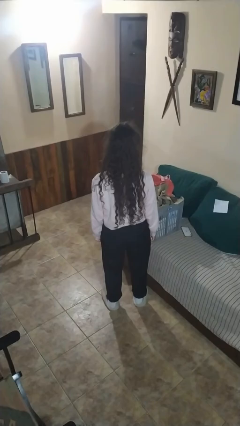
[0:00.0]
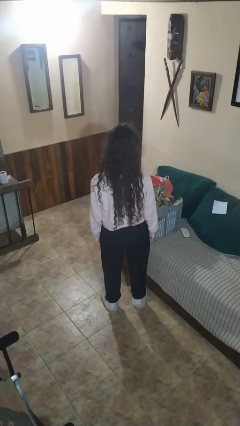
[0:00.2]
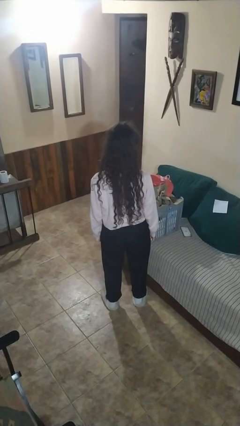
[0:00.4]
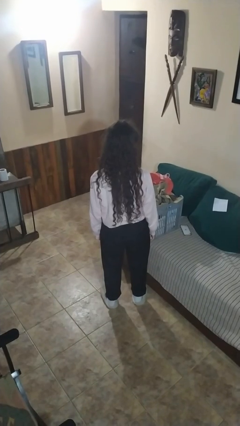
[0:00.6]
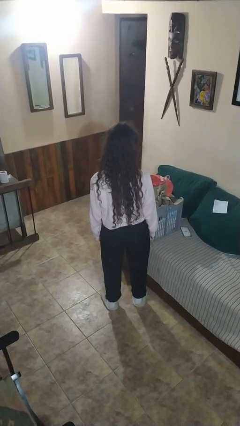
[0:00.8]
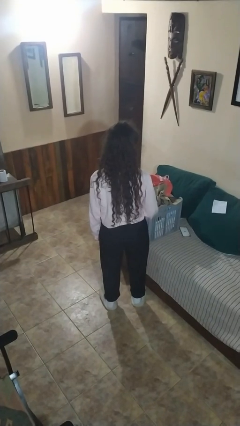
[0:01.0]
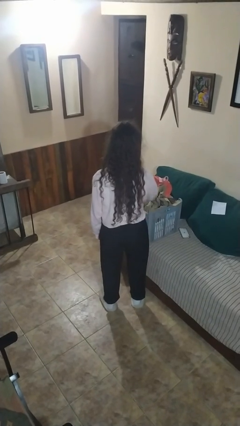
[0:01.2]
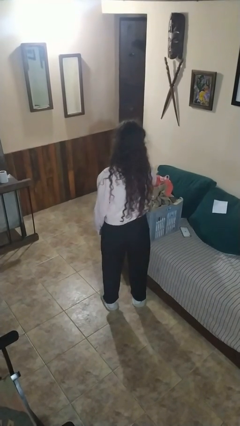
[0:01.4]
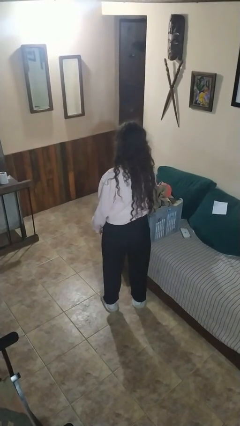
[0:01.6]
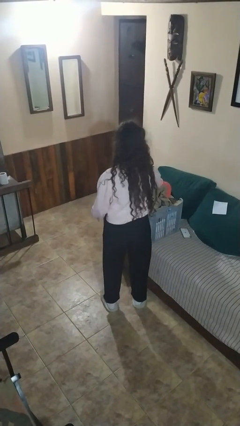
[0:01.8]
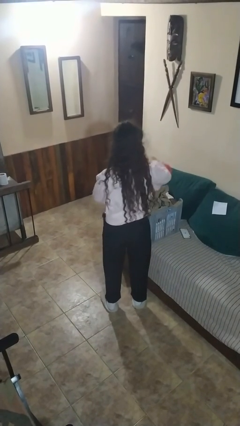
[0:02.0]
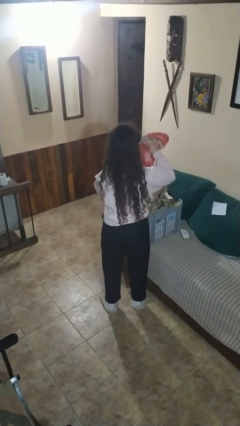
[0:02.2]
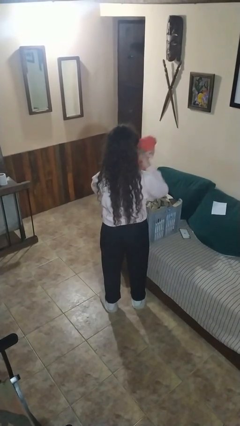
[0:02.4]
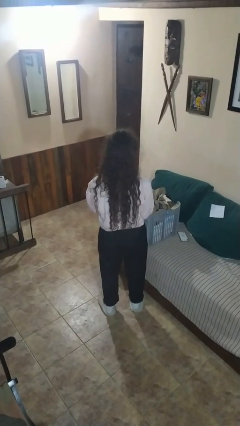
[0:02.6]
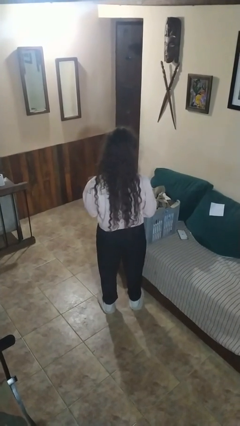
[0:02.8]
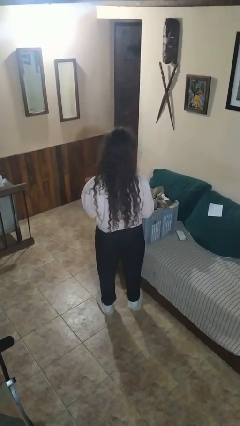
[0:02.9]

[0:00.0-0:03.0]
person takes object from basket

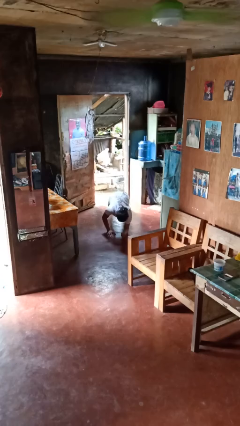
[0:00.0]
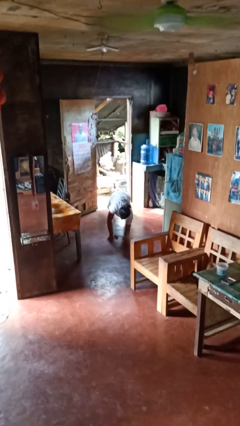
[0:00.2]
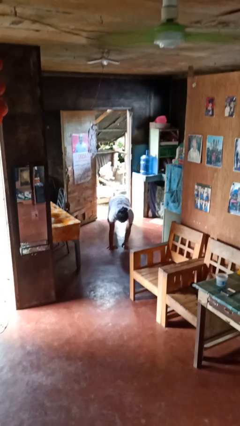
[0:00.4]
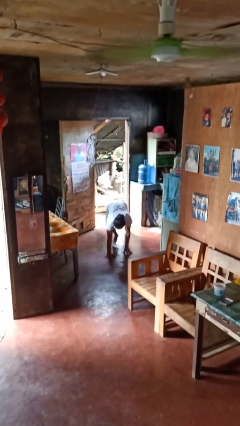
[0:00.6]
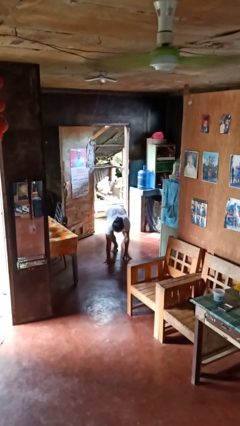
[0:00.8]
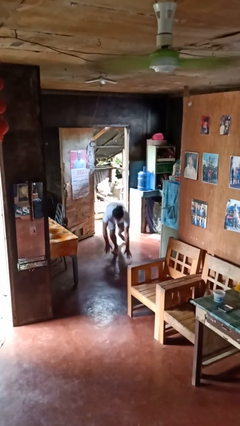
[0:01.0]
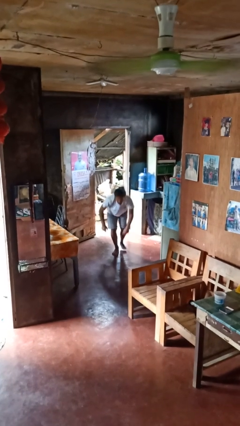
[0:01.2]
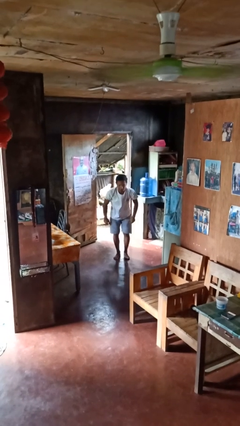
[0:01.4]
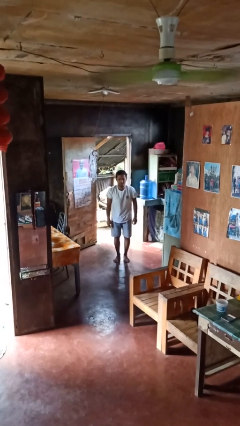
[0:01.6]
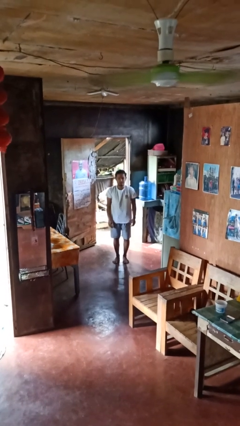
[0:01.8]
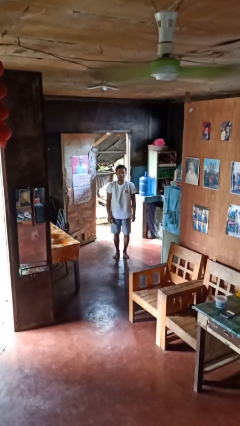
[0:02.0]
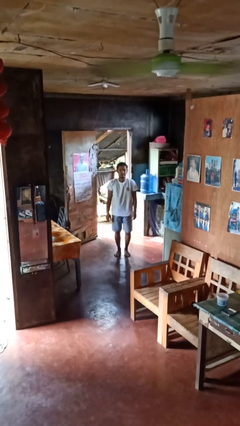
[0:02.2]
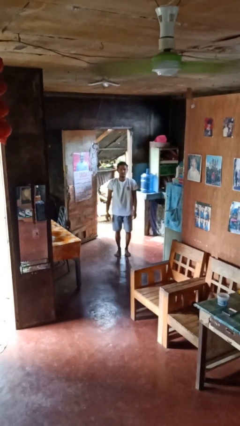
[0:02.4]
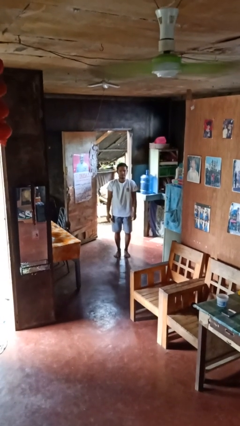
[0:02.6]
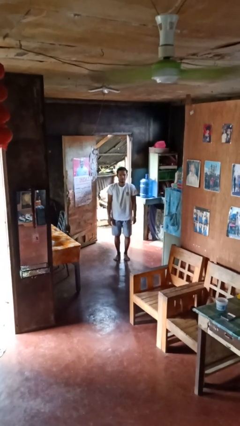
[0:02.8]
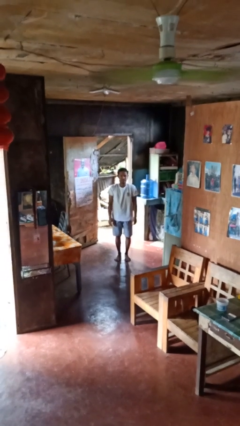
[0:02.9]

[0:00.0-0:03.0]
person stands up from floor

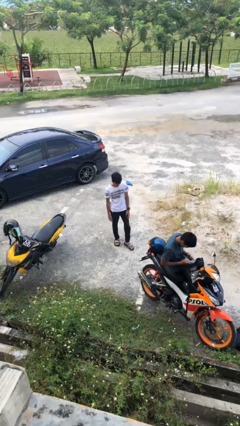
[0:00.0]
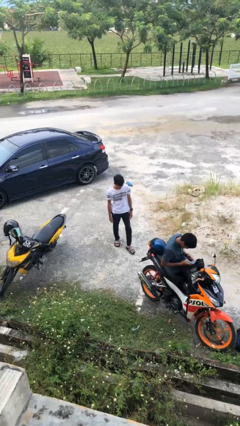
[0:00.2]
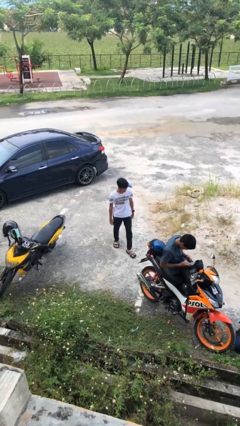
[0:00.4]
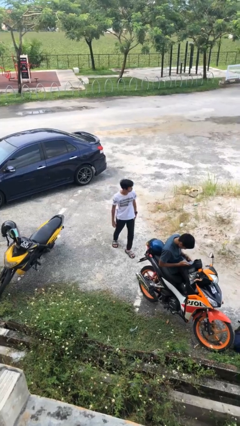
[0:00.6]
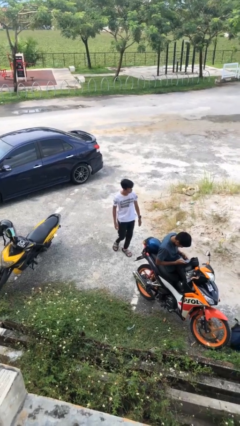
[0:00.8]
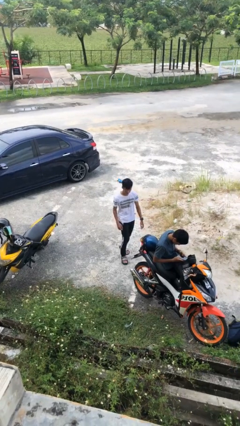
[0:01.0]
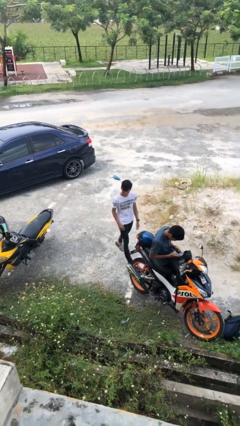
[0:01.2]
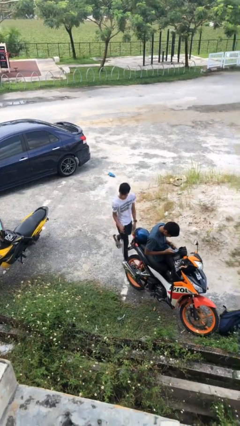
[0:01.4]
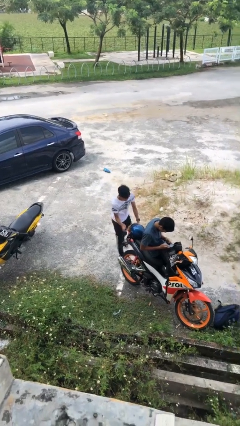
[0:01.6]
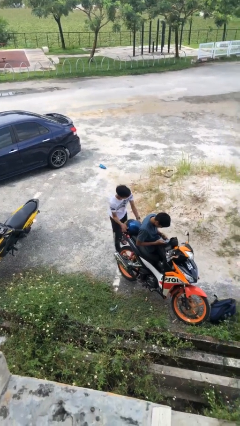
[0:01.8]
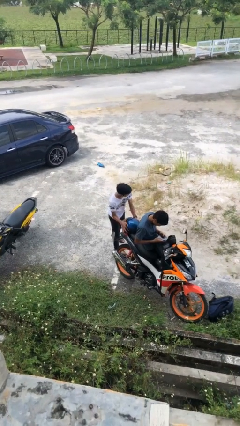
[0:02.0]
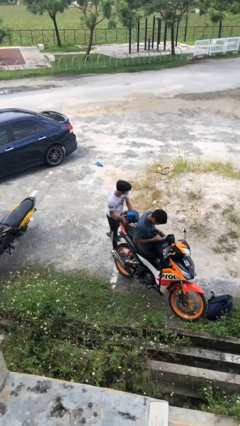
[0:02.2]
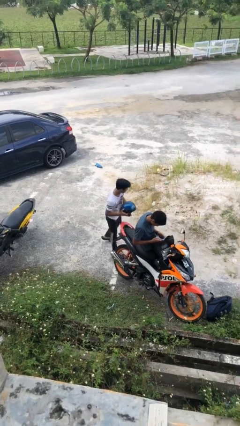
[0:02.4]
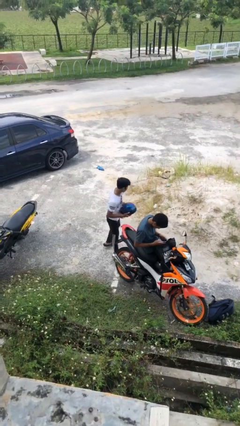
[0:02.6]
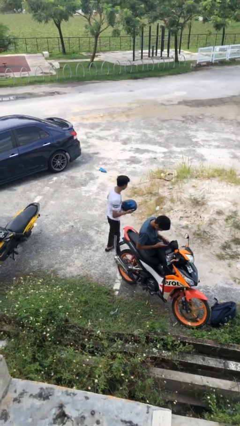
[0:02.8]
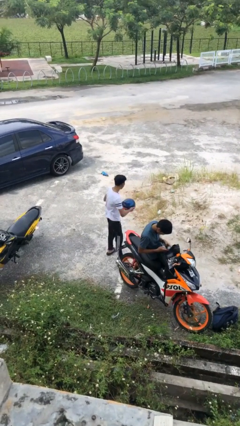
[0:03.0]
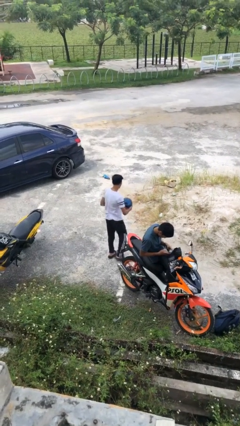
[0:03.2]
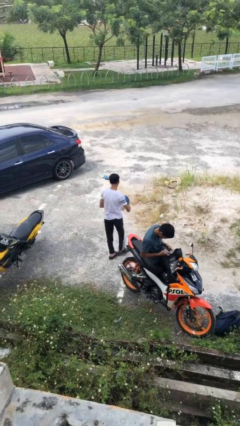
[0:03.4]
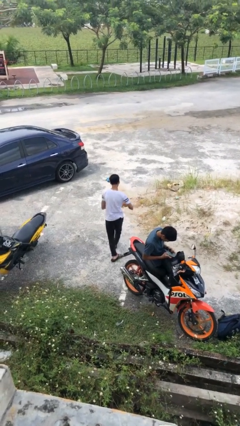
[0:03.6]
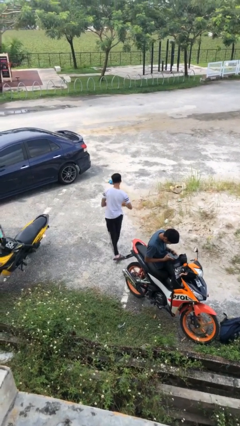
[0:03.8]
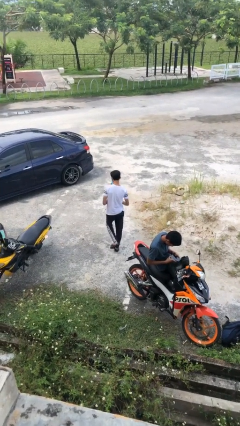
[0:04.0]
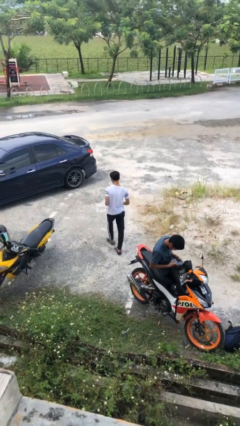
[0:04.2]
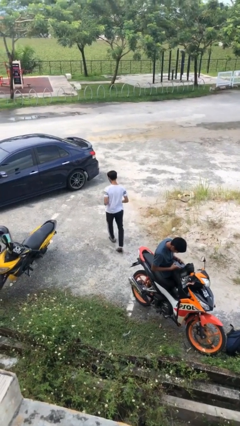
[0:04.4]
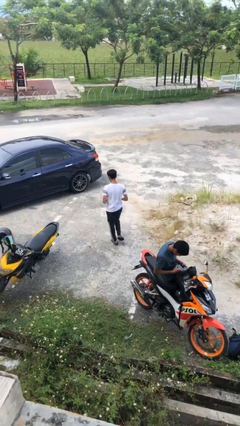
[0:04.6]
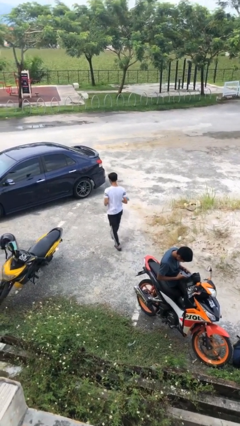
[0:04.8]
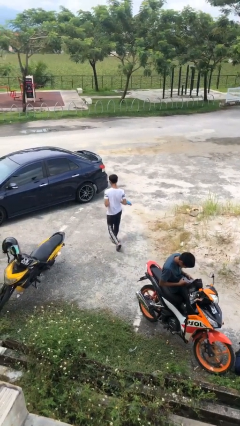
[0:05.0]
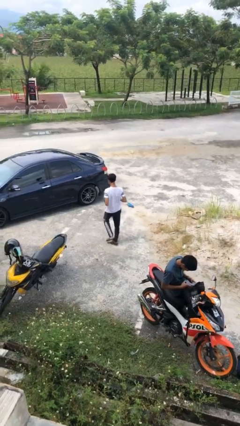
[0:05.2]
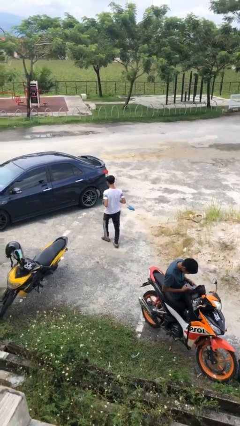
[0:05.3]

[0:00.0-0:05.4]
person steals object from person

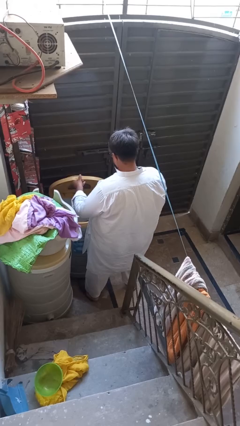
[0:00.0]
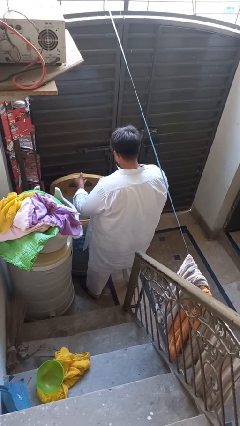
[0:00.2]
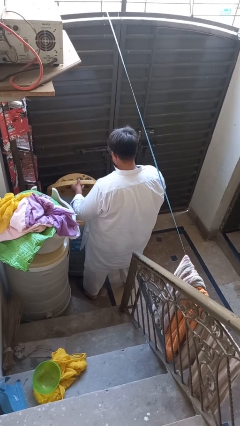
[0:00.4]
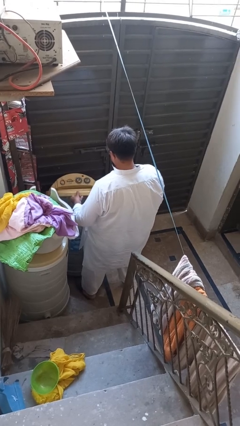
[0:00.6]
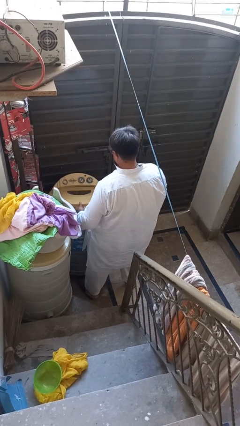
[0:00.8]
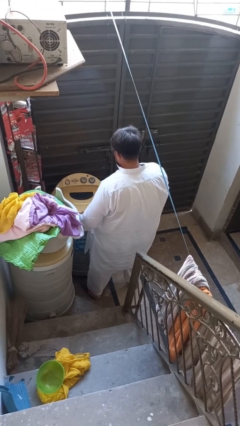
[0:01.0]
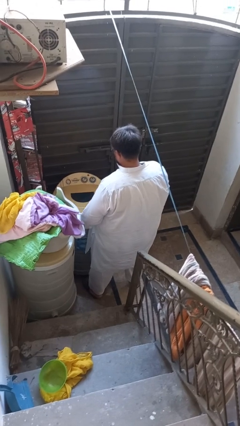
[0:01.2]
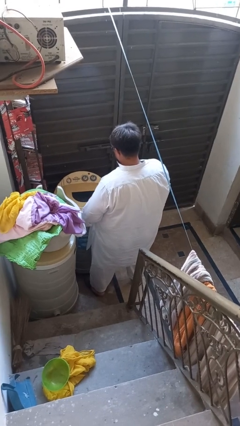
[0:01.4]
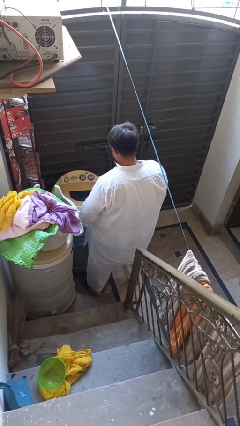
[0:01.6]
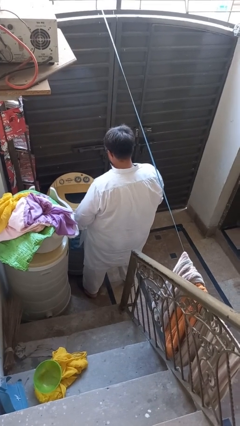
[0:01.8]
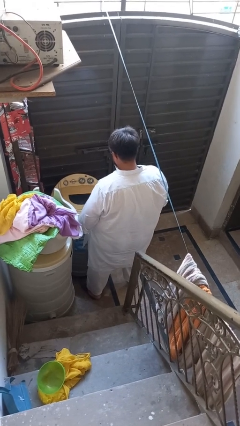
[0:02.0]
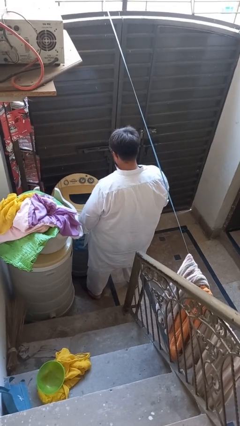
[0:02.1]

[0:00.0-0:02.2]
person closes clothes washer

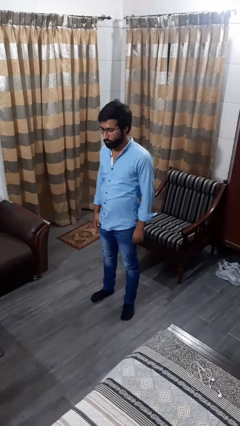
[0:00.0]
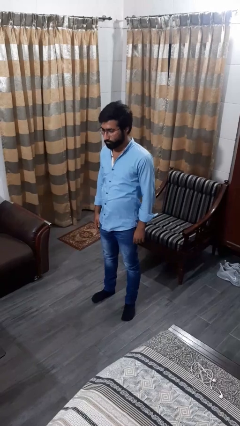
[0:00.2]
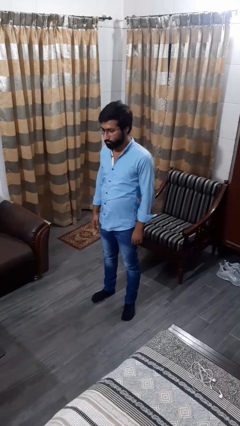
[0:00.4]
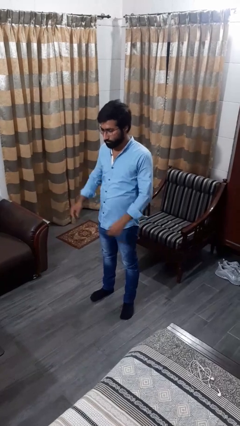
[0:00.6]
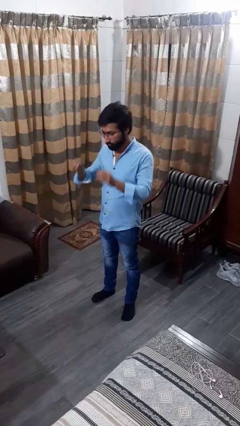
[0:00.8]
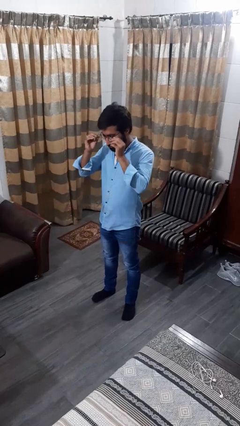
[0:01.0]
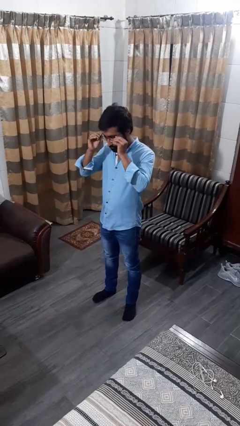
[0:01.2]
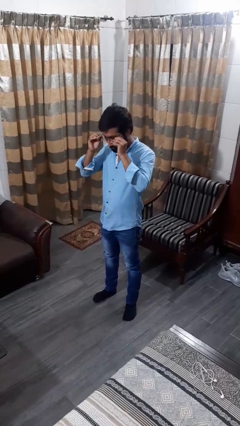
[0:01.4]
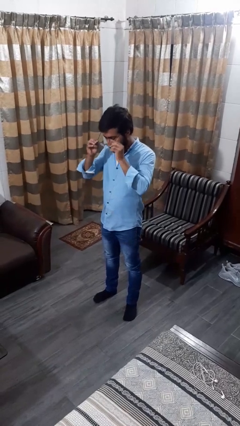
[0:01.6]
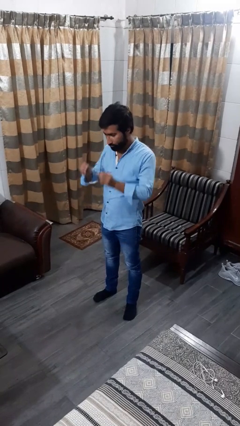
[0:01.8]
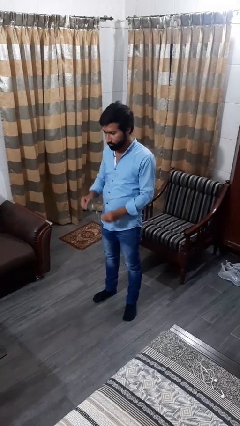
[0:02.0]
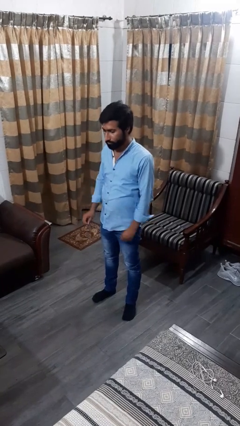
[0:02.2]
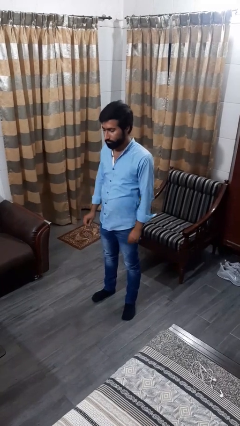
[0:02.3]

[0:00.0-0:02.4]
person takes off glasses

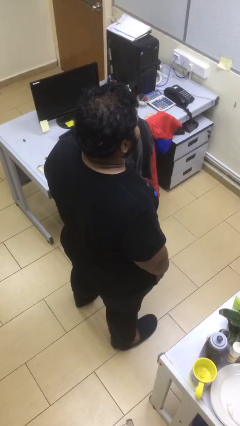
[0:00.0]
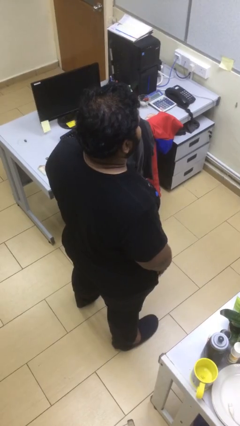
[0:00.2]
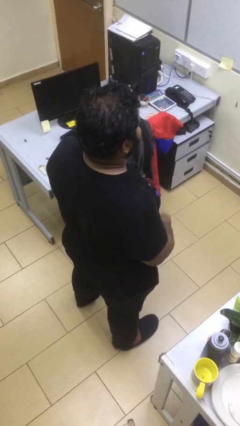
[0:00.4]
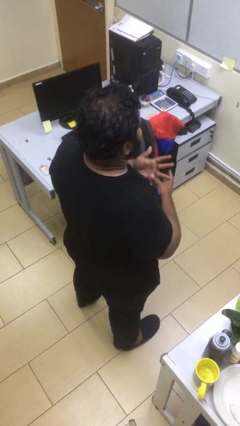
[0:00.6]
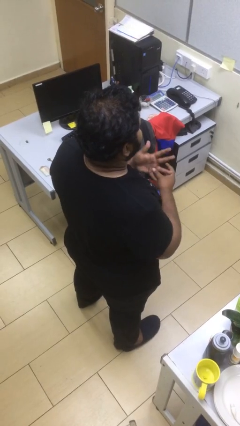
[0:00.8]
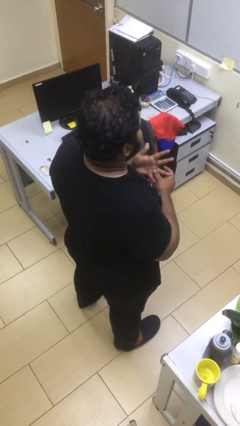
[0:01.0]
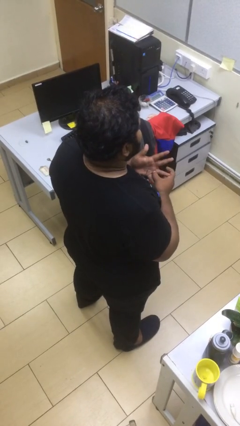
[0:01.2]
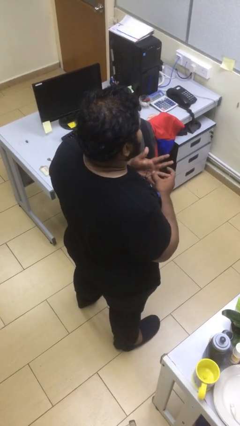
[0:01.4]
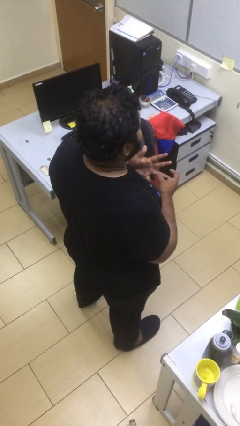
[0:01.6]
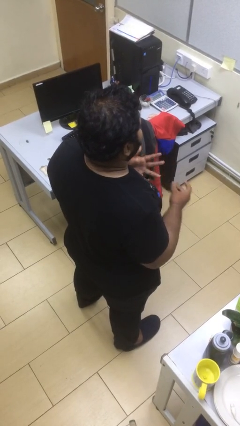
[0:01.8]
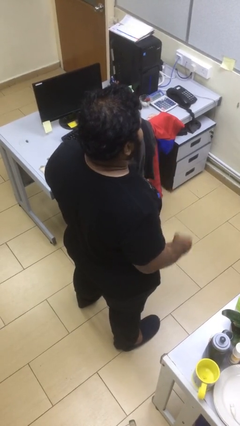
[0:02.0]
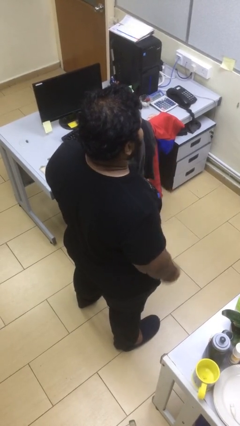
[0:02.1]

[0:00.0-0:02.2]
person takes off ring
